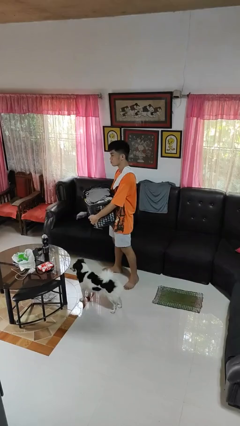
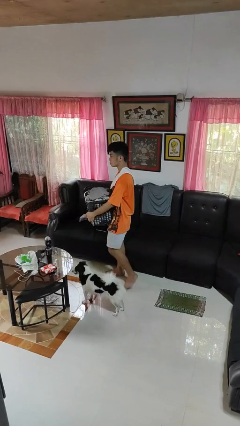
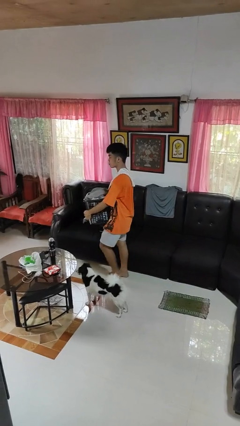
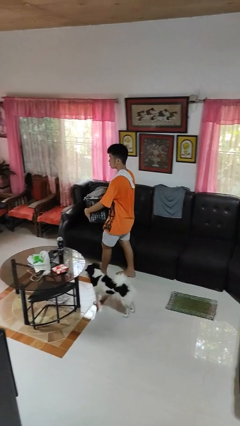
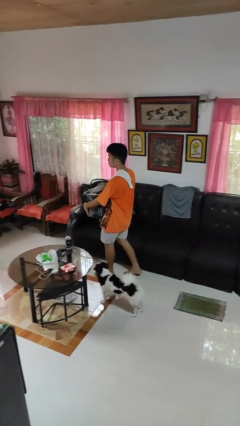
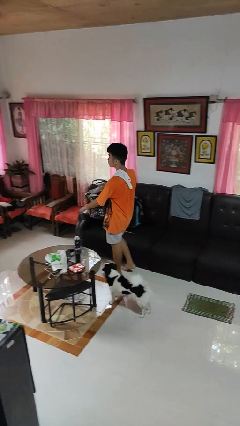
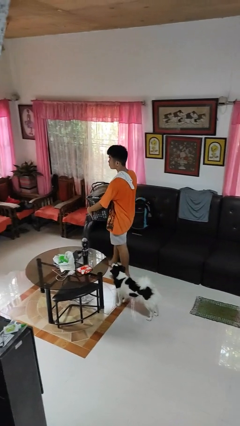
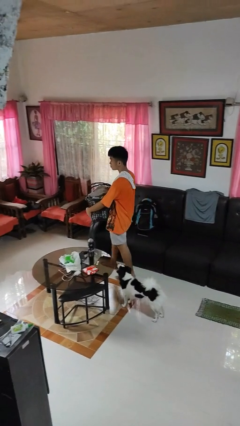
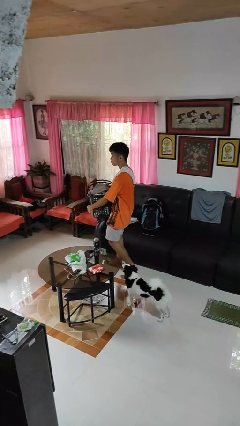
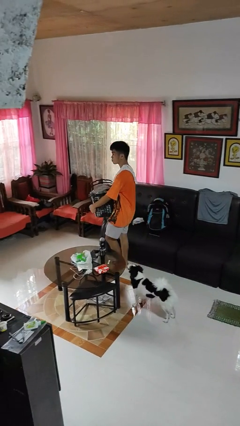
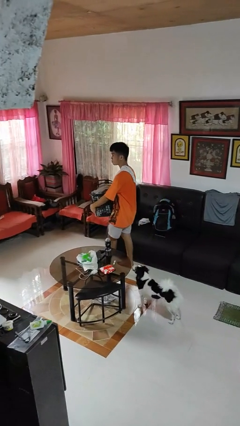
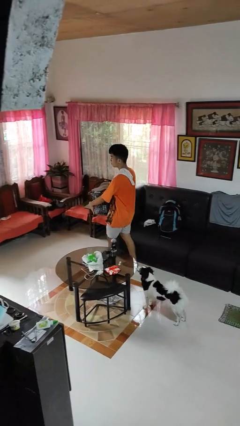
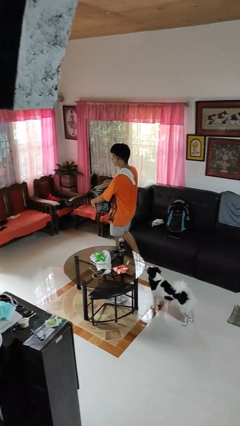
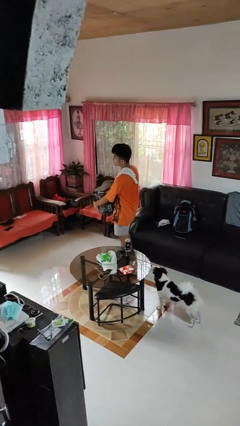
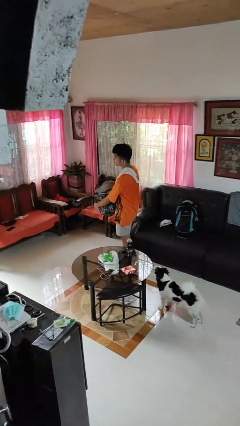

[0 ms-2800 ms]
person carries laundry basket

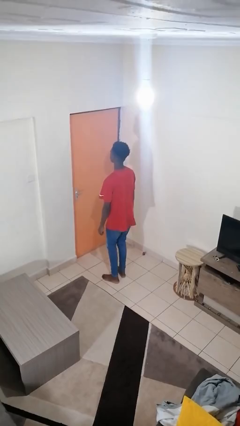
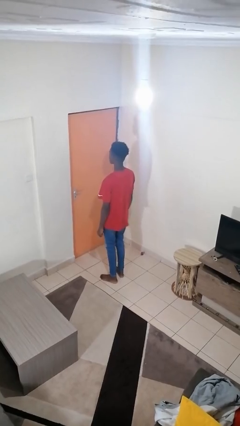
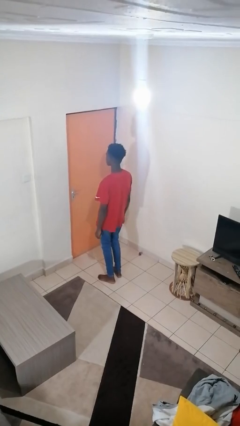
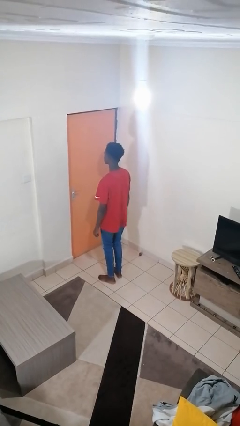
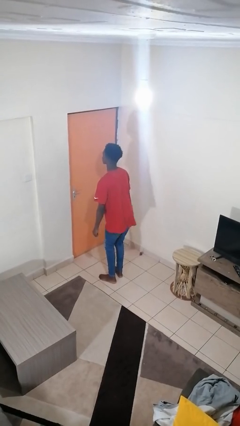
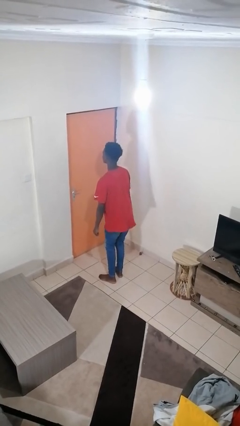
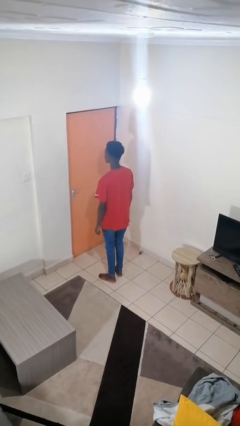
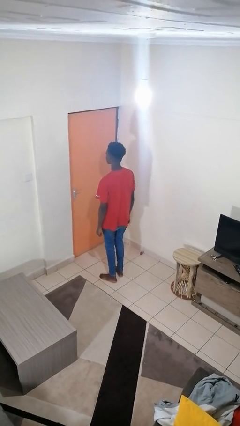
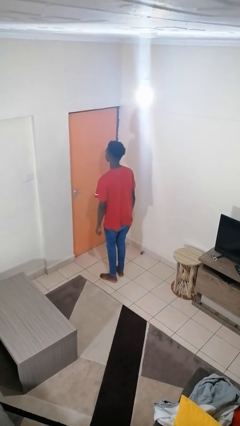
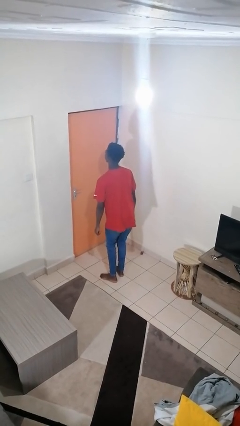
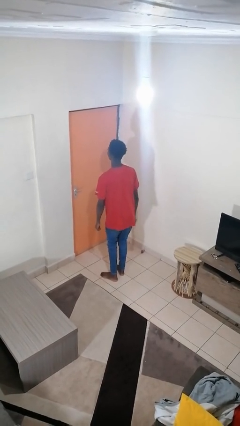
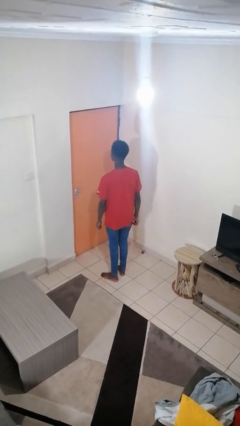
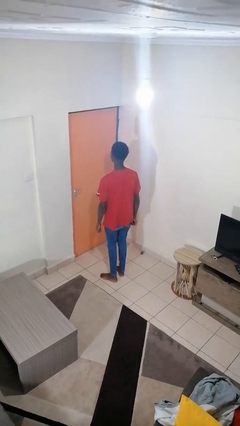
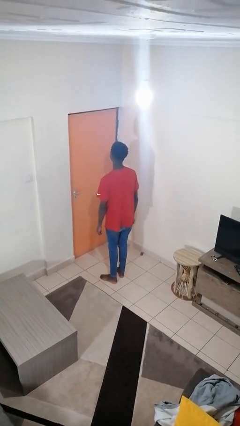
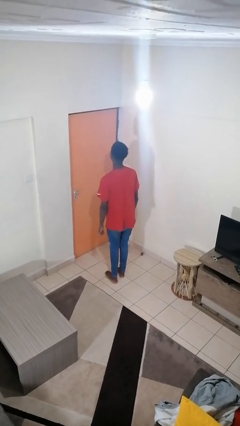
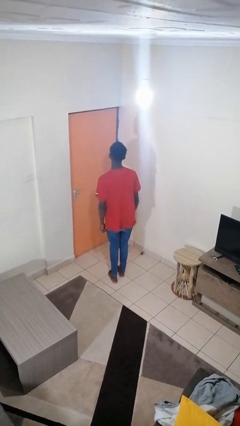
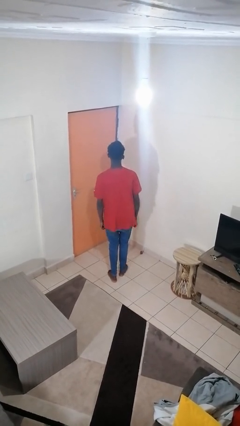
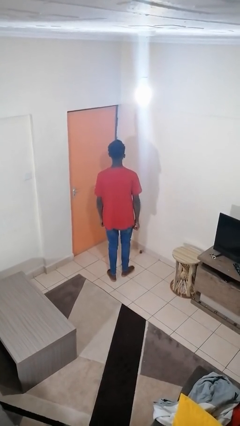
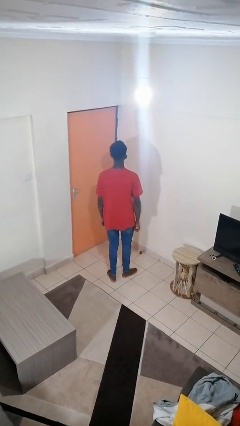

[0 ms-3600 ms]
person wiggles hips

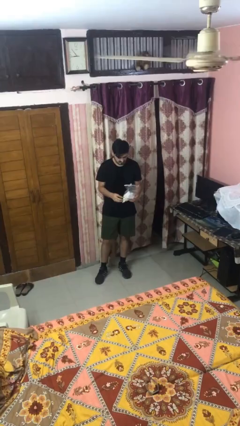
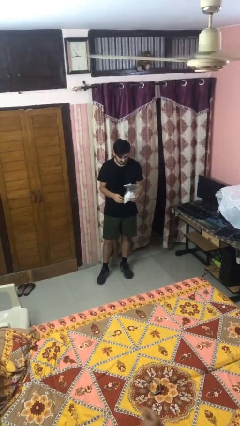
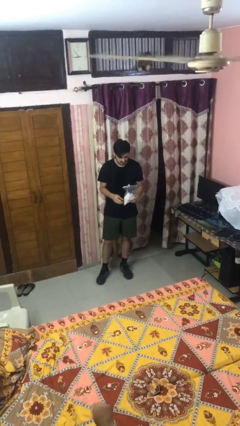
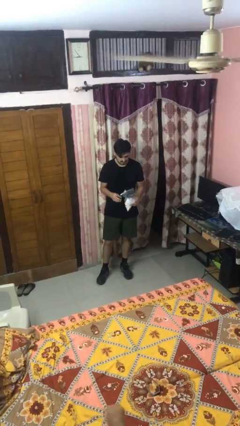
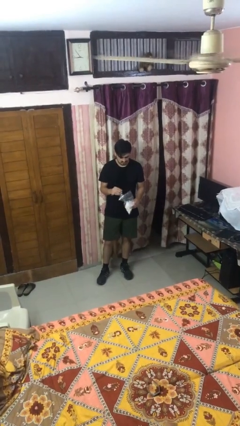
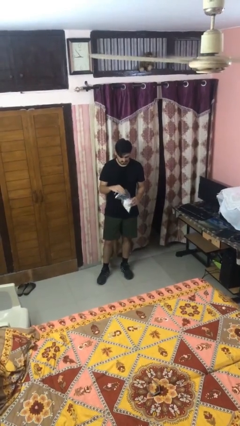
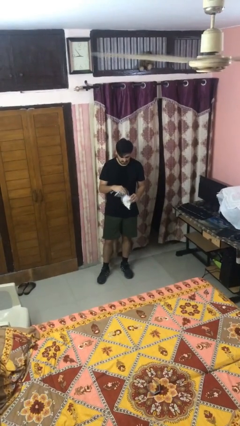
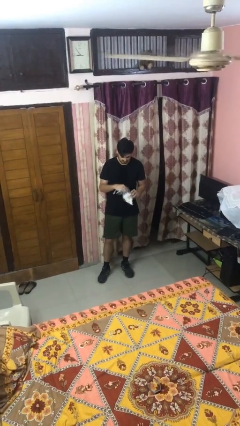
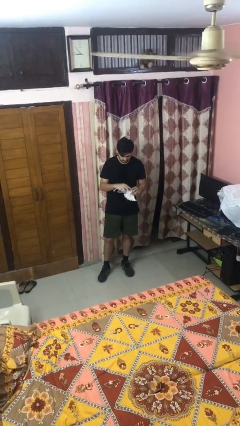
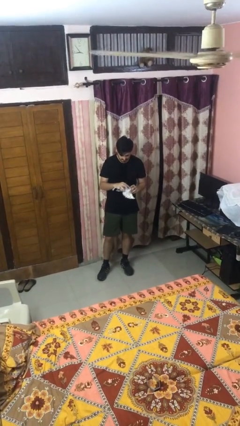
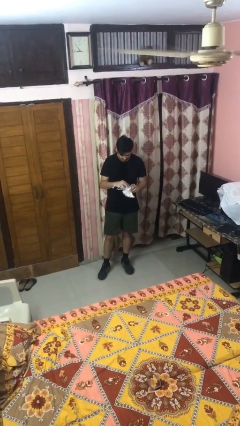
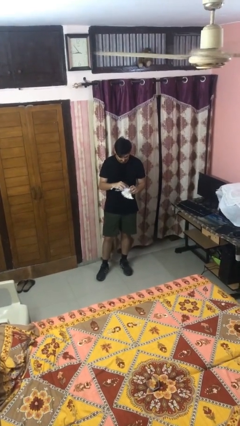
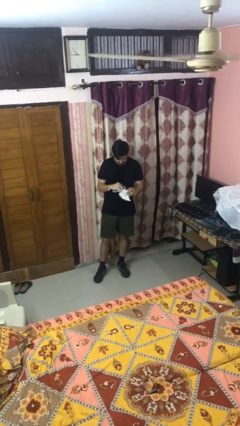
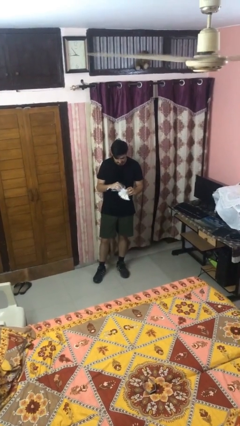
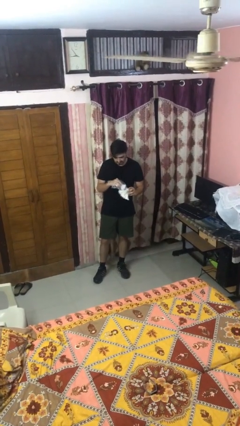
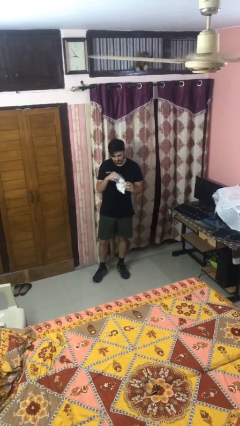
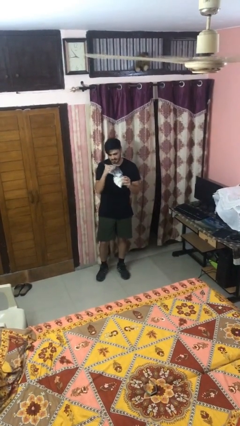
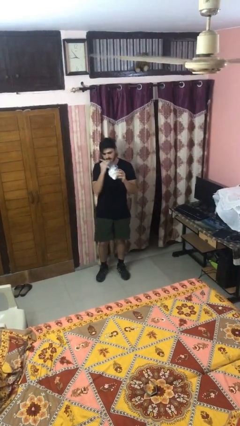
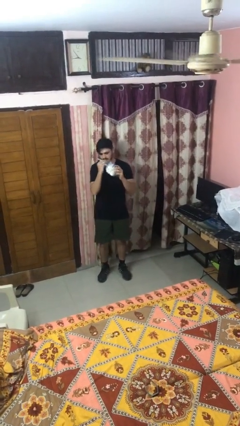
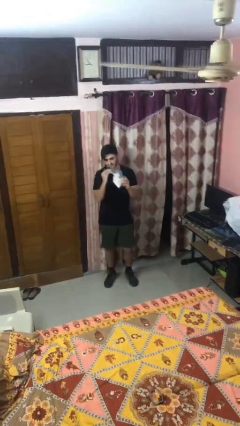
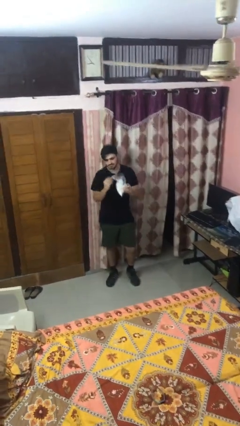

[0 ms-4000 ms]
person eats snack from bag

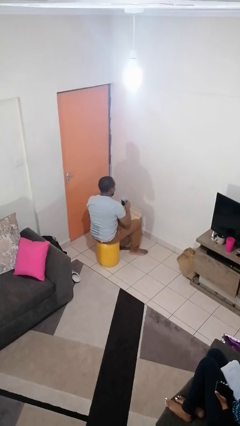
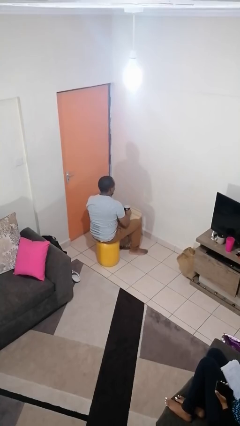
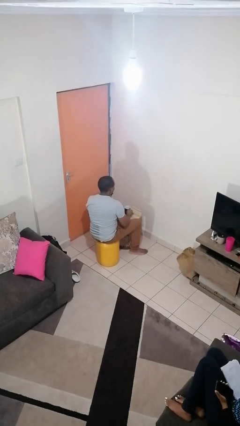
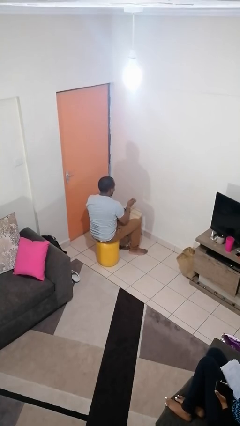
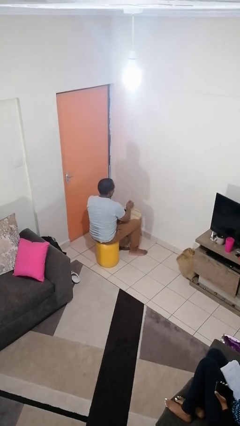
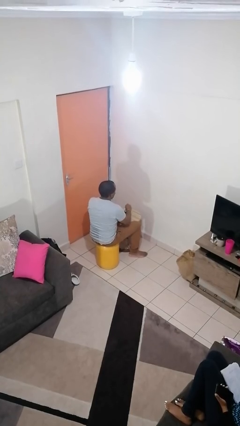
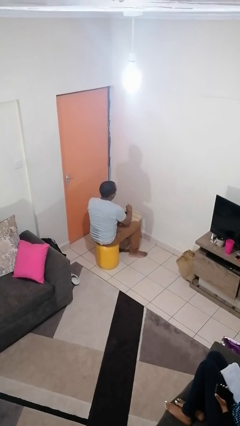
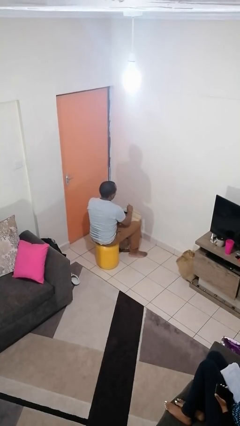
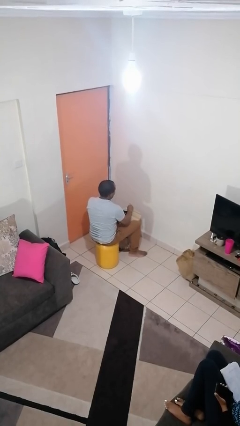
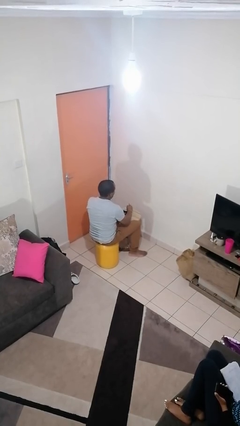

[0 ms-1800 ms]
person stirs mug

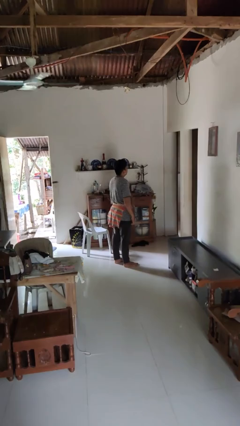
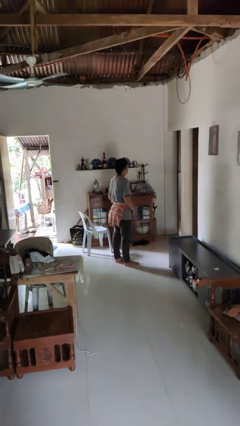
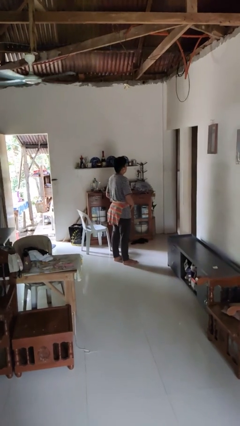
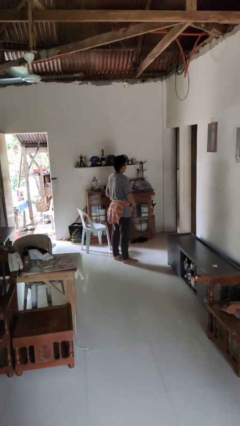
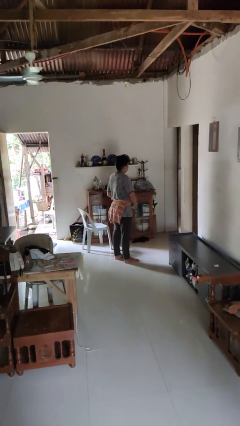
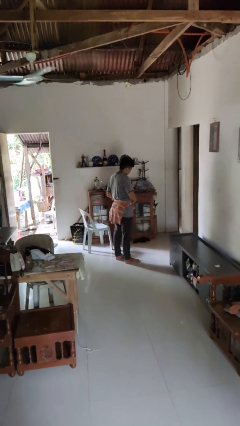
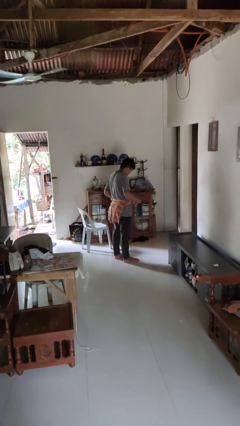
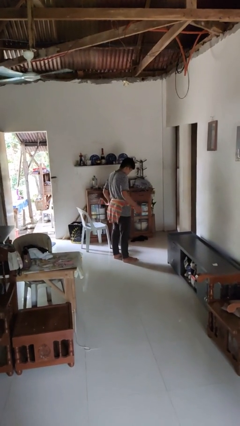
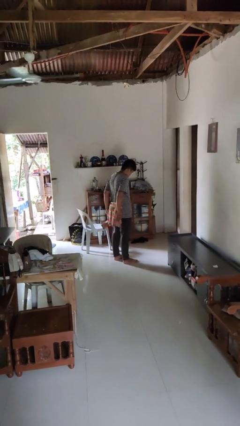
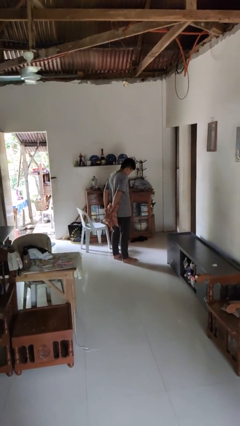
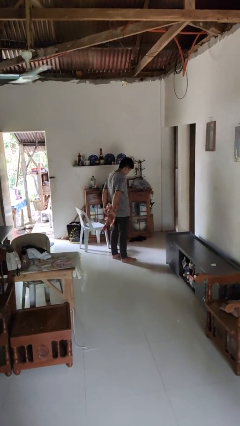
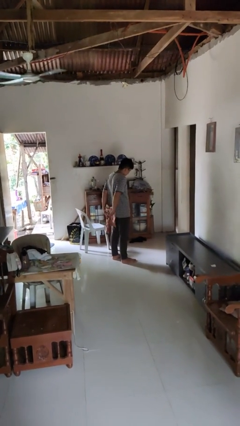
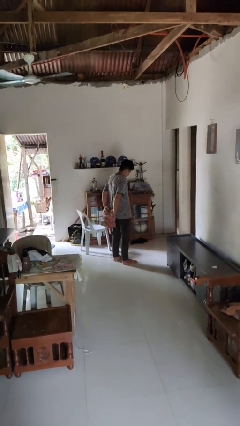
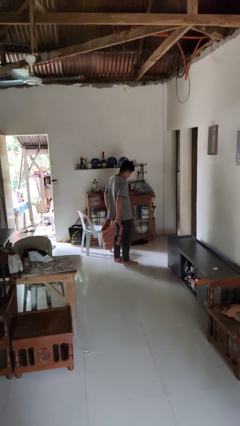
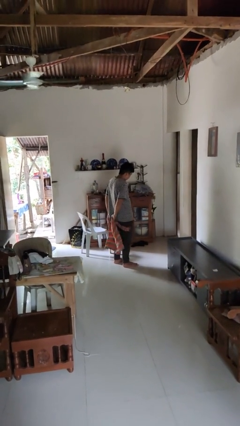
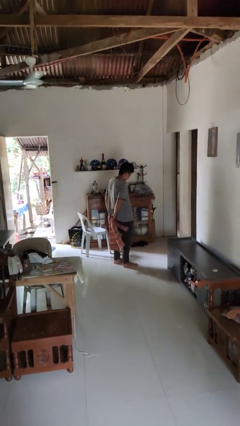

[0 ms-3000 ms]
person unties jacket around waist

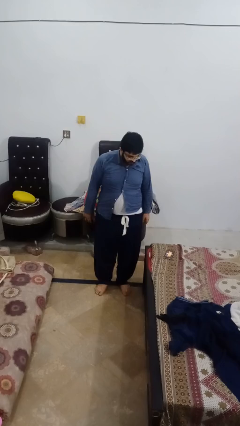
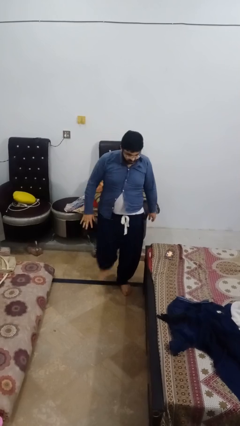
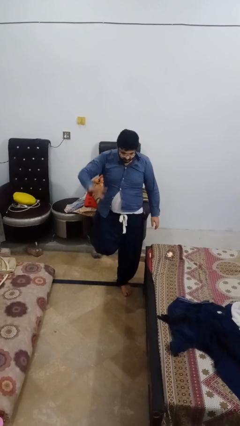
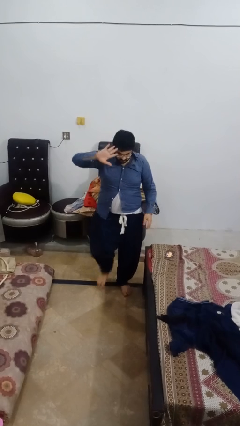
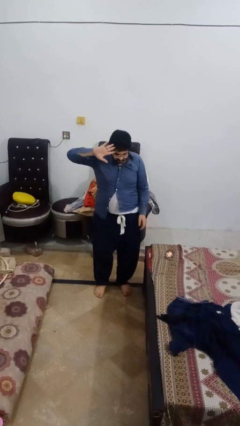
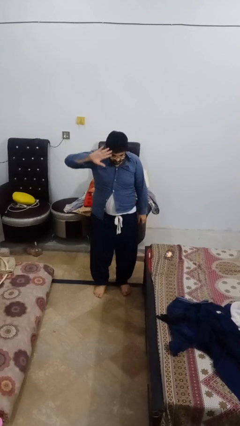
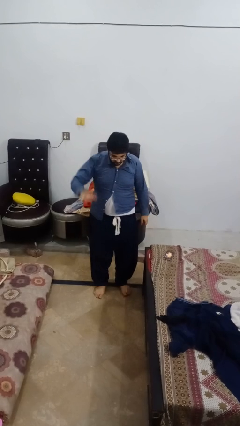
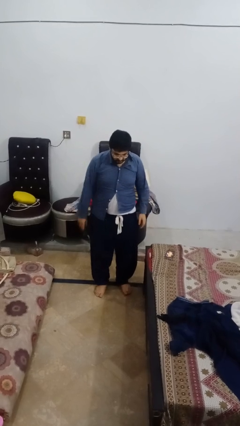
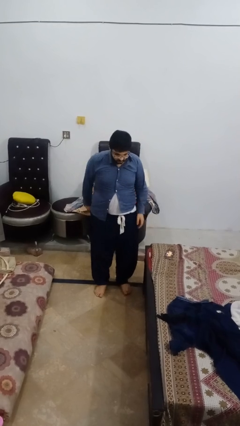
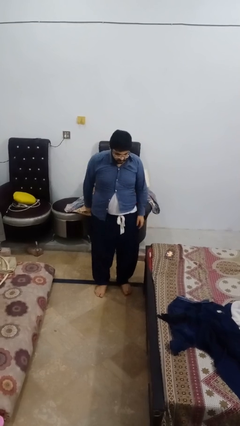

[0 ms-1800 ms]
person salutes
